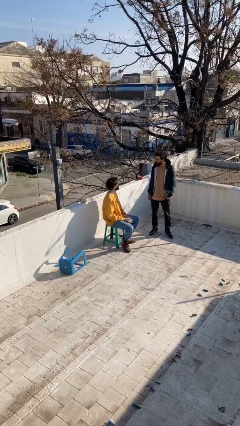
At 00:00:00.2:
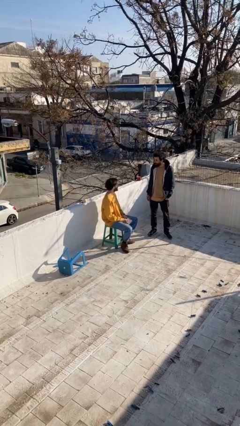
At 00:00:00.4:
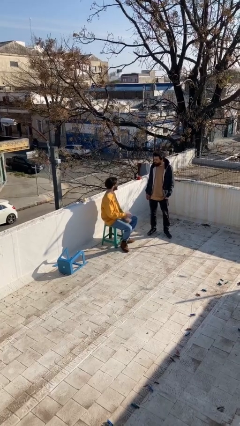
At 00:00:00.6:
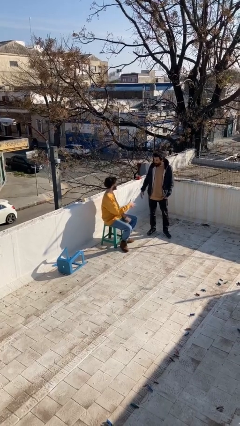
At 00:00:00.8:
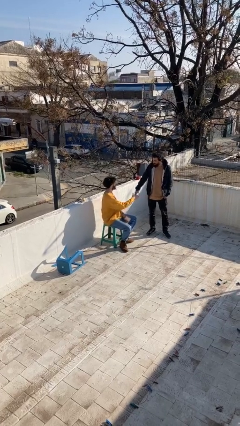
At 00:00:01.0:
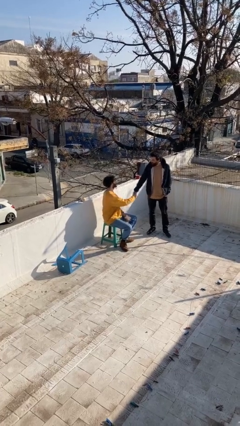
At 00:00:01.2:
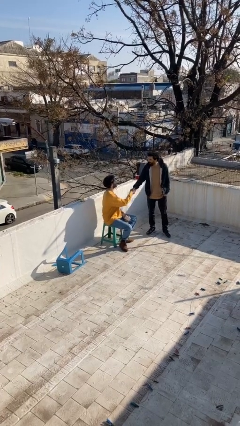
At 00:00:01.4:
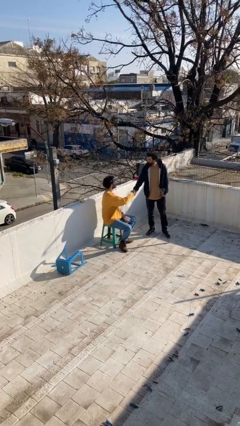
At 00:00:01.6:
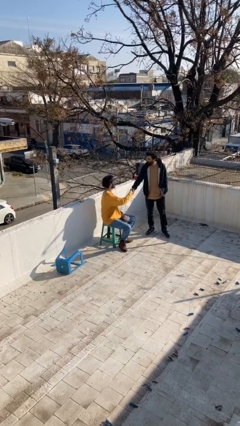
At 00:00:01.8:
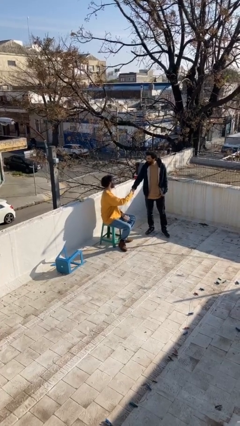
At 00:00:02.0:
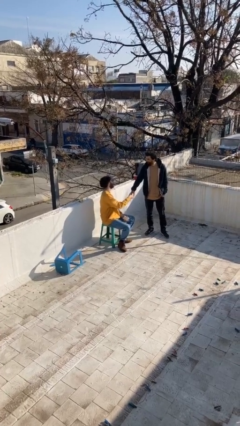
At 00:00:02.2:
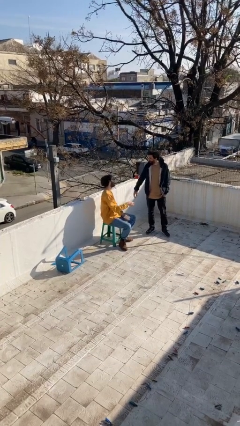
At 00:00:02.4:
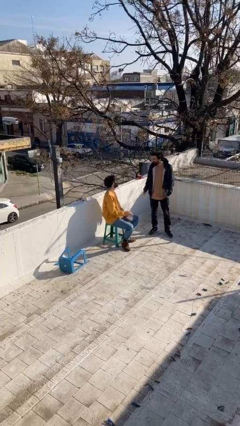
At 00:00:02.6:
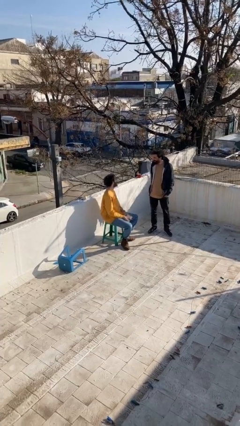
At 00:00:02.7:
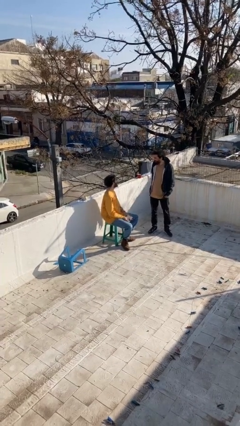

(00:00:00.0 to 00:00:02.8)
person shakes hand

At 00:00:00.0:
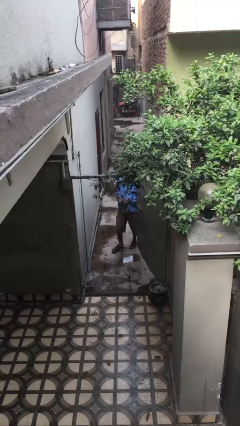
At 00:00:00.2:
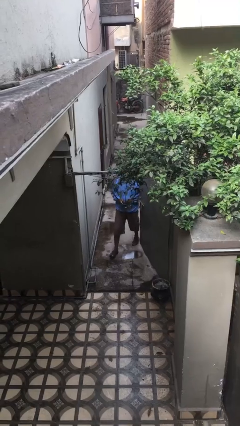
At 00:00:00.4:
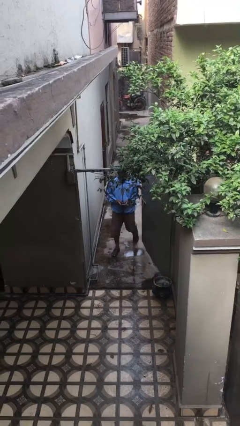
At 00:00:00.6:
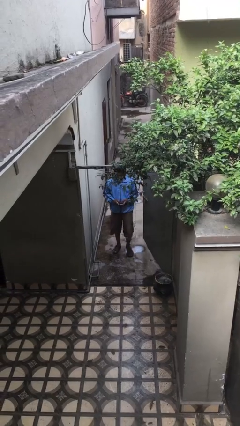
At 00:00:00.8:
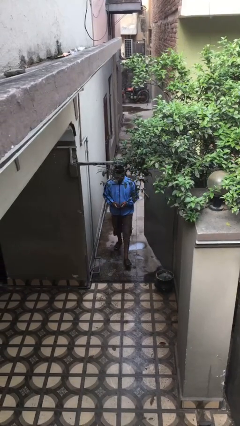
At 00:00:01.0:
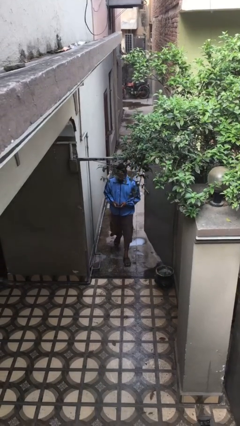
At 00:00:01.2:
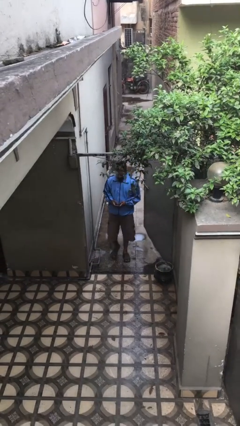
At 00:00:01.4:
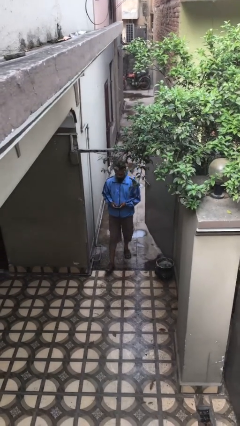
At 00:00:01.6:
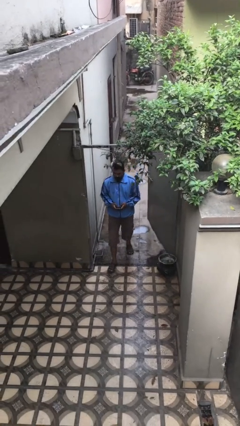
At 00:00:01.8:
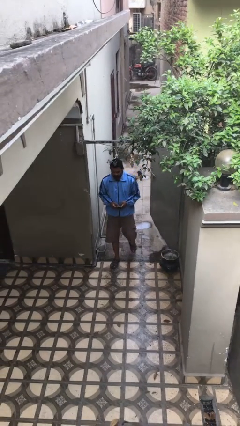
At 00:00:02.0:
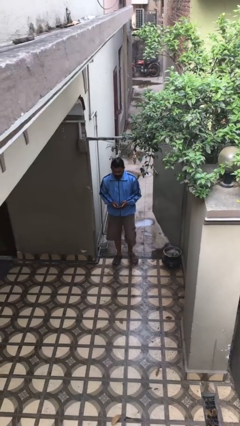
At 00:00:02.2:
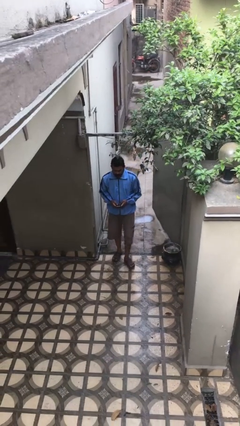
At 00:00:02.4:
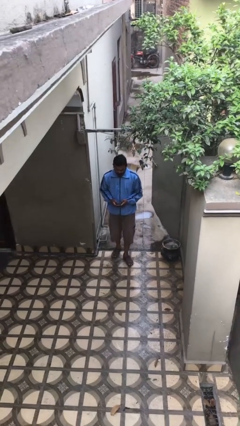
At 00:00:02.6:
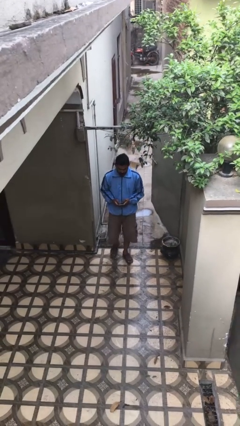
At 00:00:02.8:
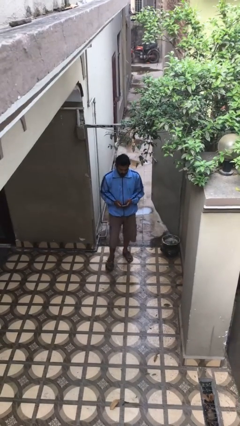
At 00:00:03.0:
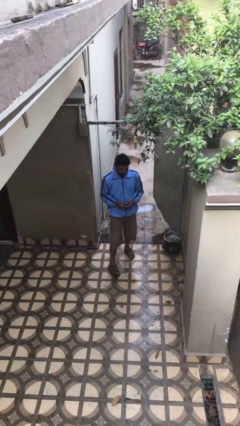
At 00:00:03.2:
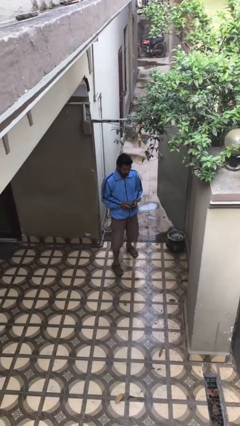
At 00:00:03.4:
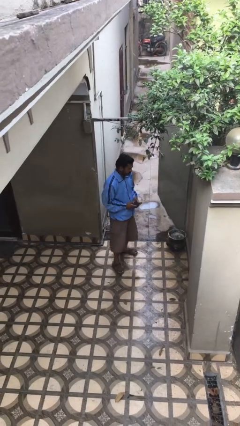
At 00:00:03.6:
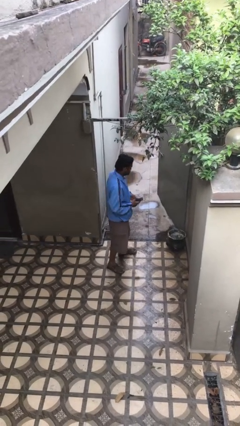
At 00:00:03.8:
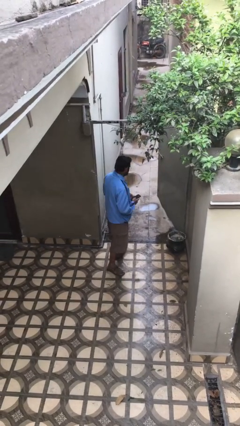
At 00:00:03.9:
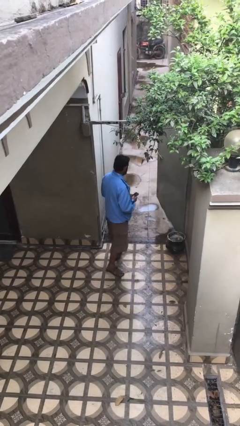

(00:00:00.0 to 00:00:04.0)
person enters scene through structure

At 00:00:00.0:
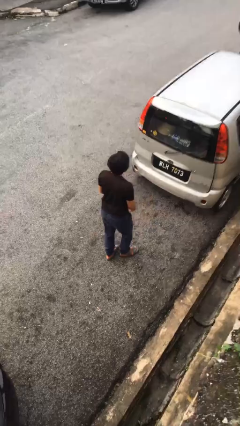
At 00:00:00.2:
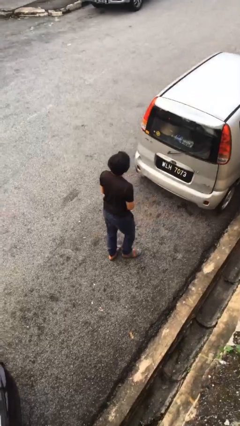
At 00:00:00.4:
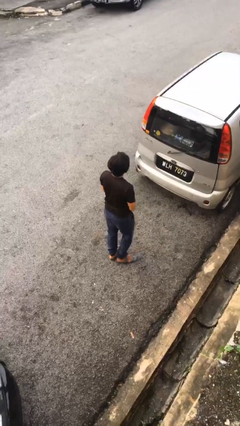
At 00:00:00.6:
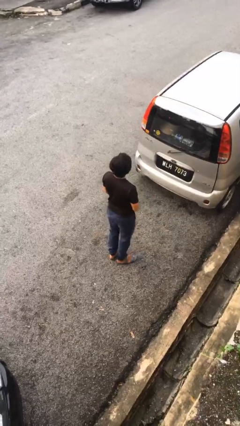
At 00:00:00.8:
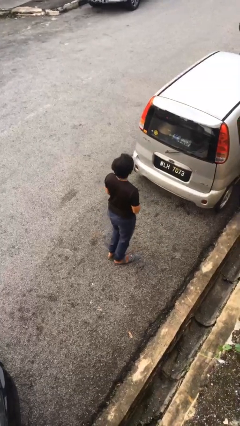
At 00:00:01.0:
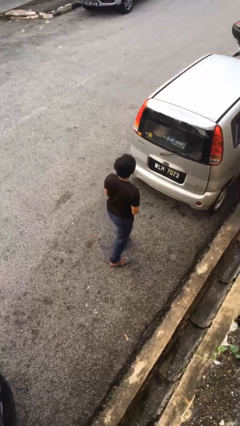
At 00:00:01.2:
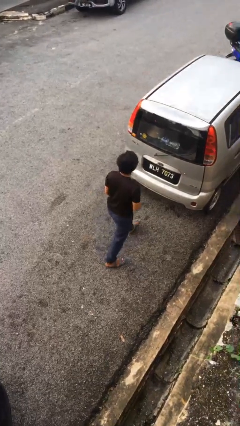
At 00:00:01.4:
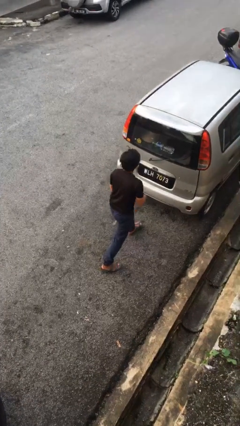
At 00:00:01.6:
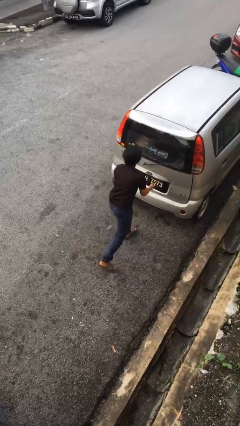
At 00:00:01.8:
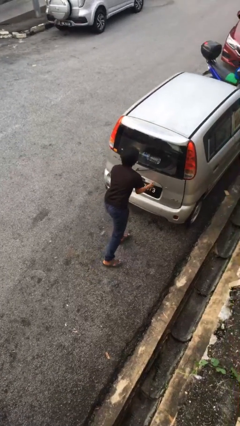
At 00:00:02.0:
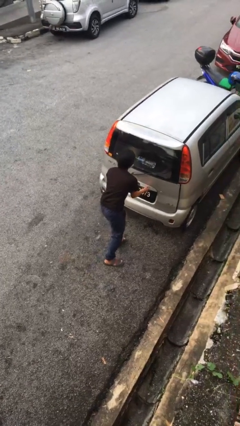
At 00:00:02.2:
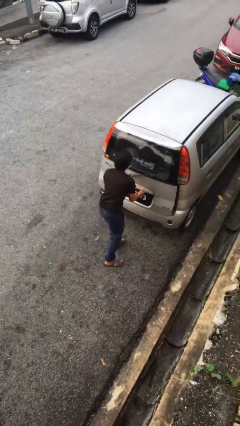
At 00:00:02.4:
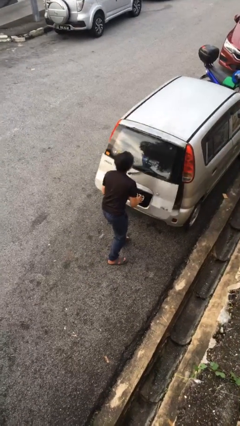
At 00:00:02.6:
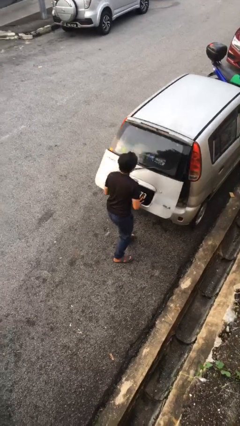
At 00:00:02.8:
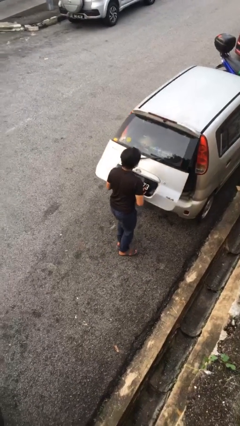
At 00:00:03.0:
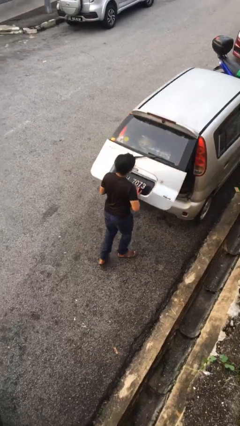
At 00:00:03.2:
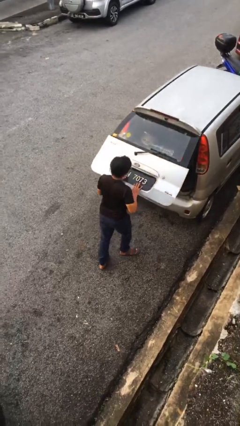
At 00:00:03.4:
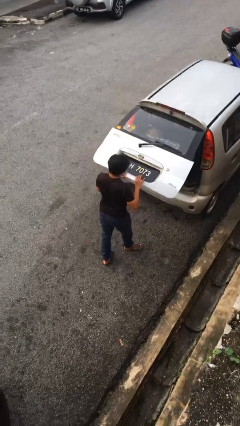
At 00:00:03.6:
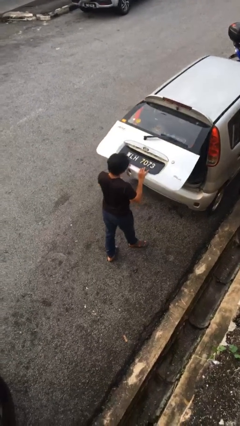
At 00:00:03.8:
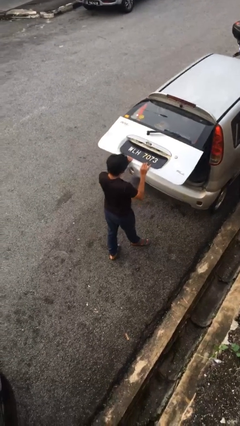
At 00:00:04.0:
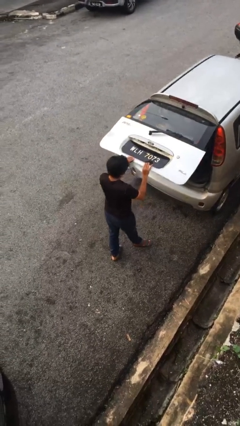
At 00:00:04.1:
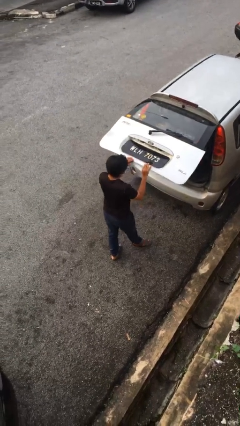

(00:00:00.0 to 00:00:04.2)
person opens car trunk

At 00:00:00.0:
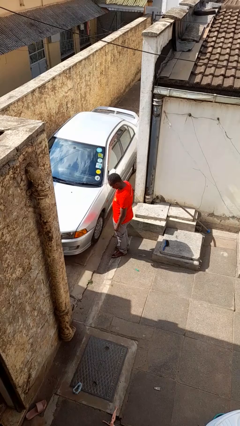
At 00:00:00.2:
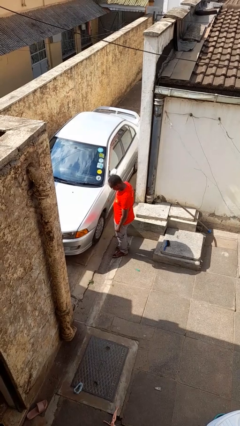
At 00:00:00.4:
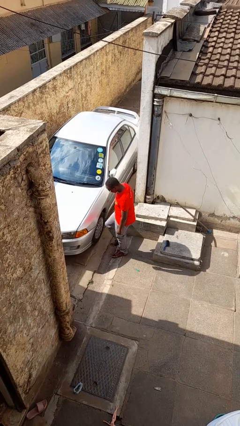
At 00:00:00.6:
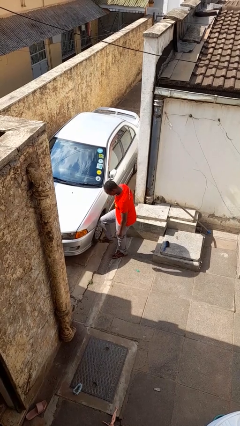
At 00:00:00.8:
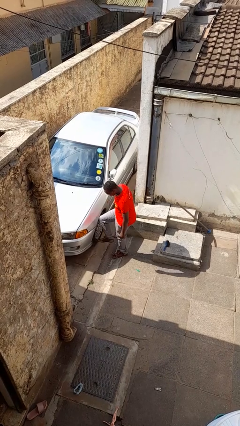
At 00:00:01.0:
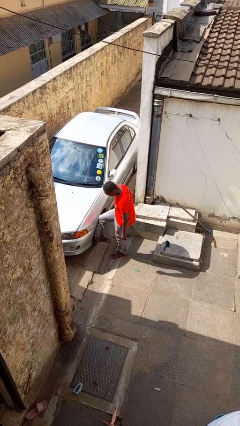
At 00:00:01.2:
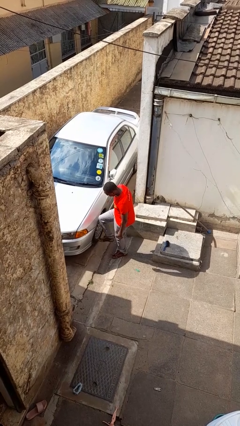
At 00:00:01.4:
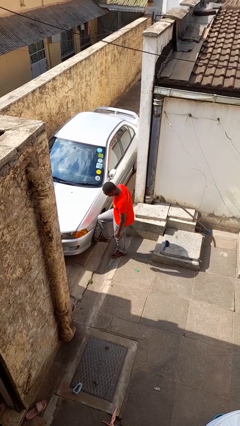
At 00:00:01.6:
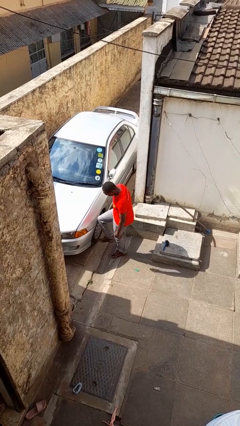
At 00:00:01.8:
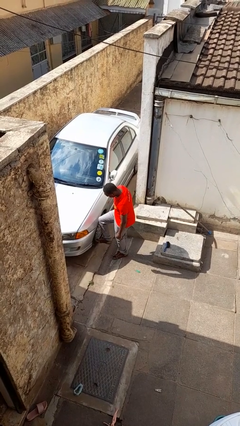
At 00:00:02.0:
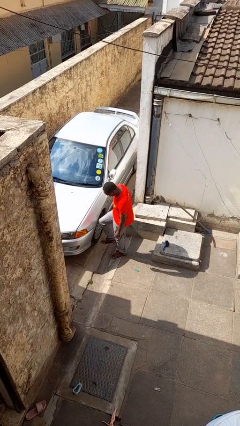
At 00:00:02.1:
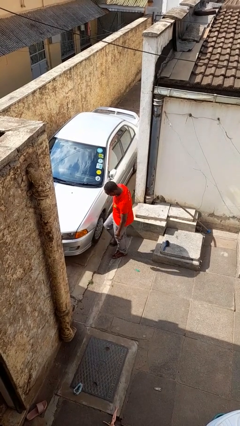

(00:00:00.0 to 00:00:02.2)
person kicks car tires

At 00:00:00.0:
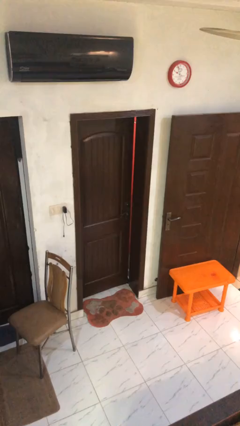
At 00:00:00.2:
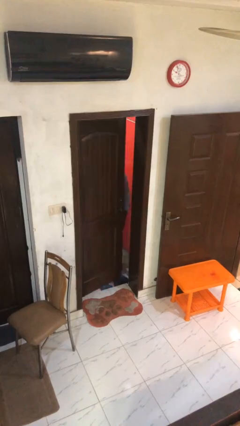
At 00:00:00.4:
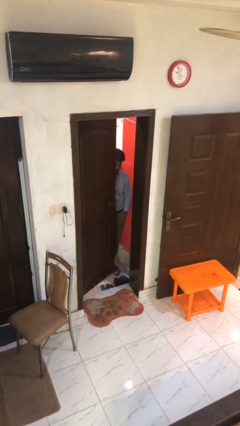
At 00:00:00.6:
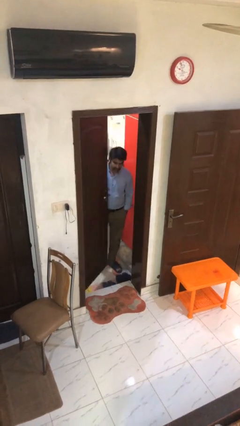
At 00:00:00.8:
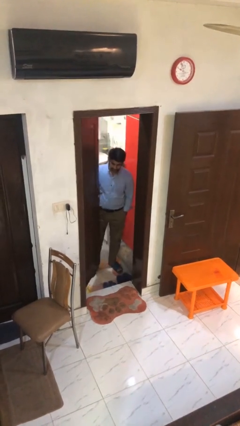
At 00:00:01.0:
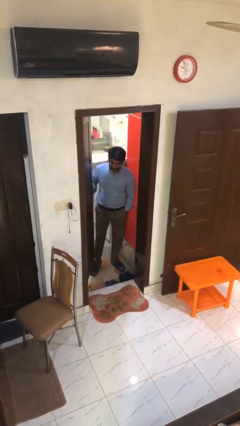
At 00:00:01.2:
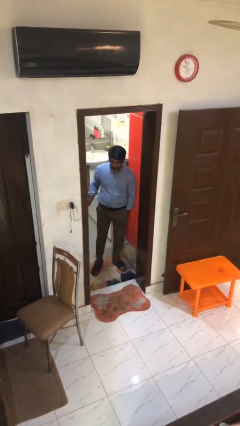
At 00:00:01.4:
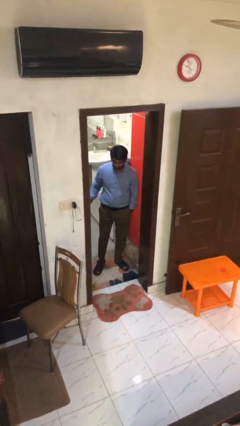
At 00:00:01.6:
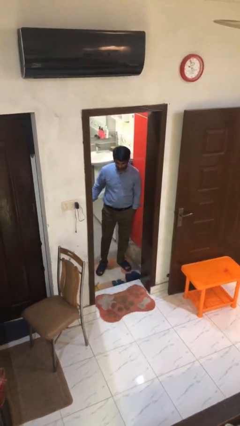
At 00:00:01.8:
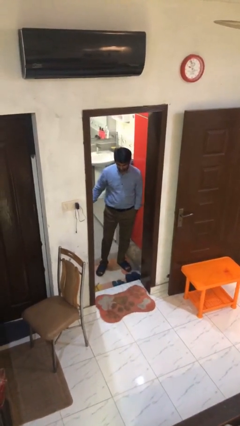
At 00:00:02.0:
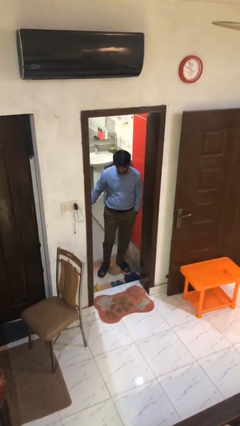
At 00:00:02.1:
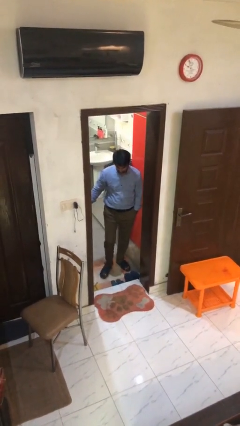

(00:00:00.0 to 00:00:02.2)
person opens facility door

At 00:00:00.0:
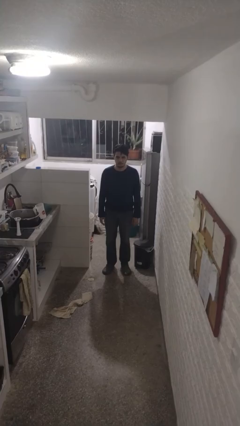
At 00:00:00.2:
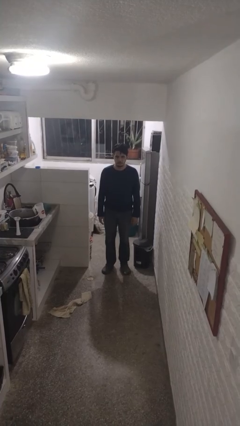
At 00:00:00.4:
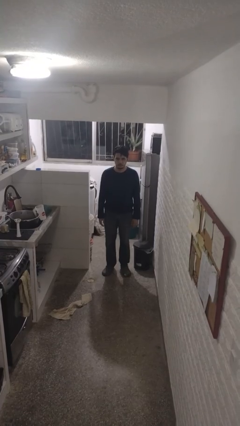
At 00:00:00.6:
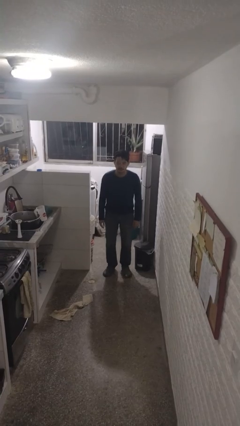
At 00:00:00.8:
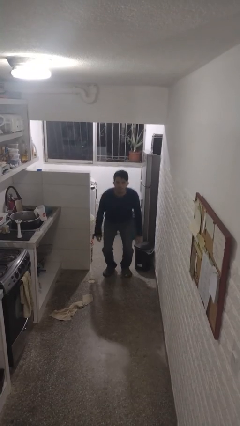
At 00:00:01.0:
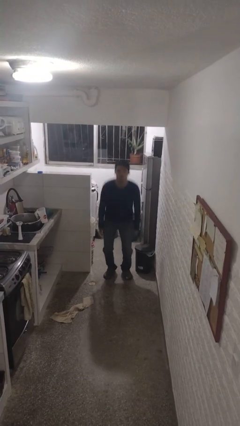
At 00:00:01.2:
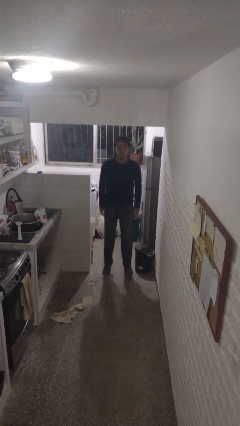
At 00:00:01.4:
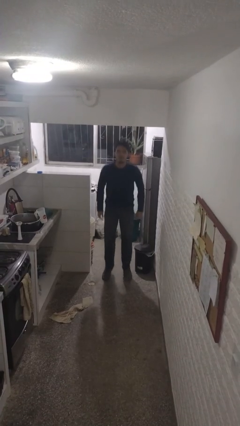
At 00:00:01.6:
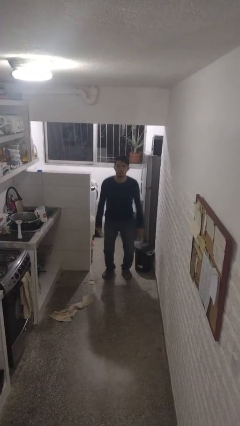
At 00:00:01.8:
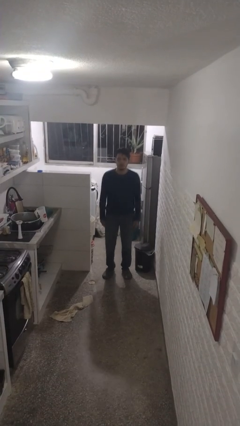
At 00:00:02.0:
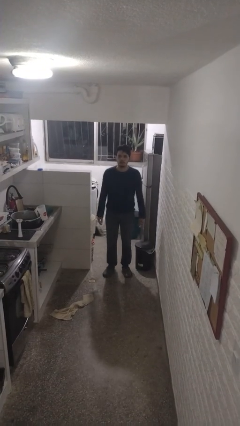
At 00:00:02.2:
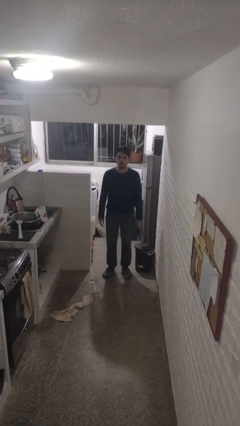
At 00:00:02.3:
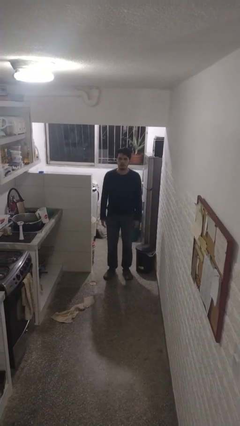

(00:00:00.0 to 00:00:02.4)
person jumps
